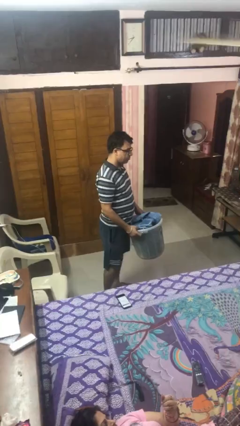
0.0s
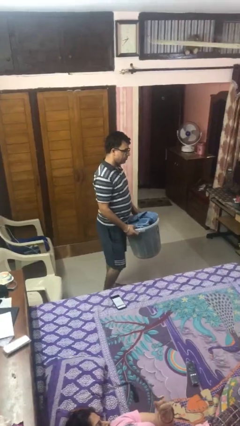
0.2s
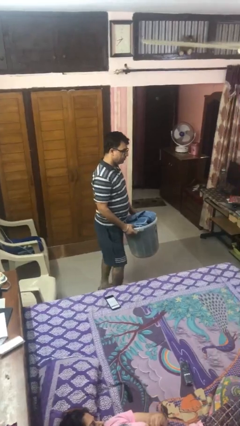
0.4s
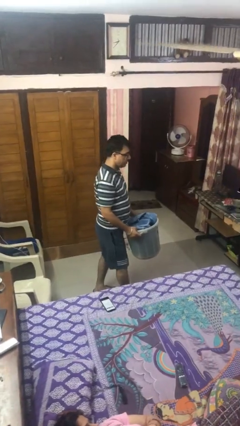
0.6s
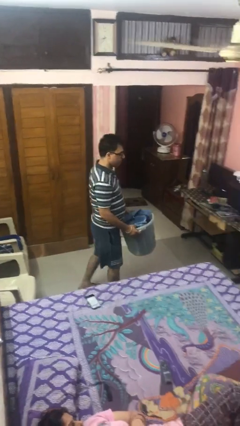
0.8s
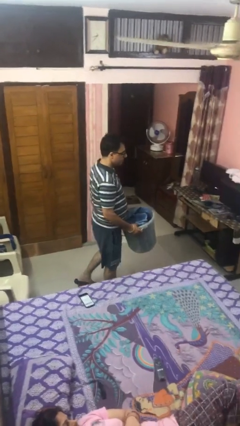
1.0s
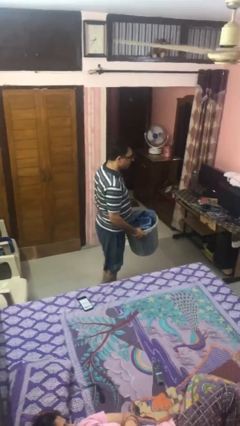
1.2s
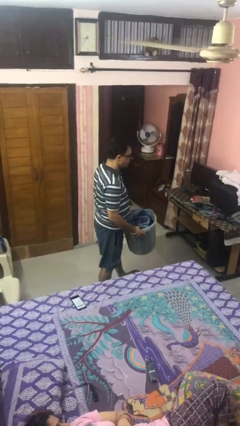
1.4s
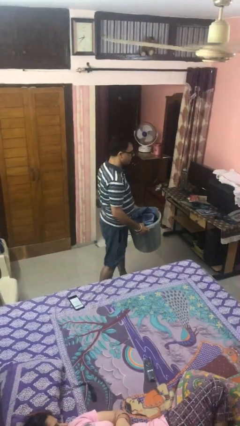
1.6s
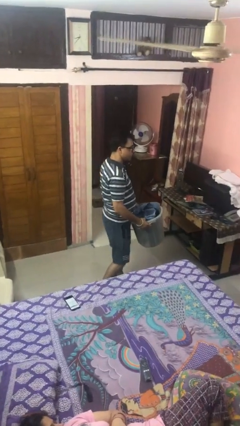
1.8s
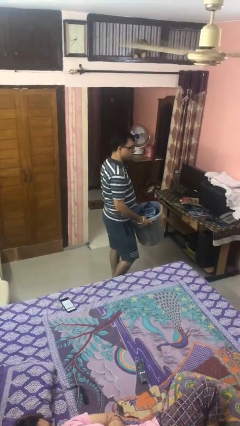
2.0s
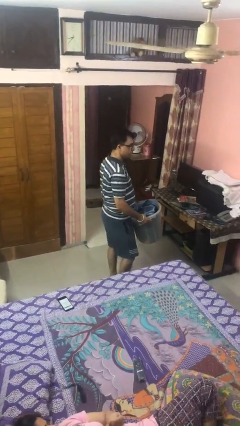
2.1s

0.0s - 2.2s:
person carries laundry basket

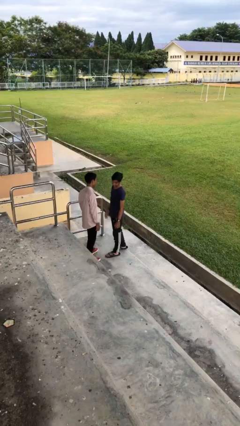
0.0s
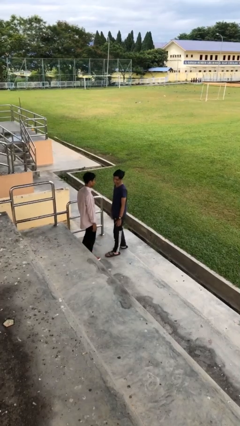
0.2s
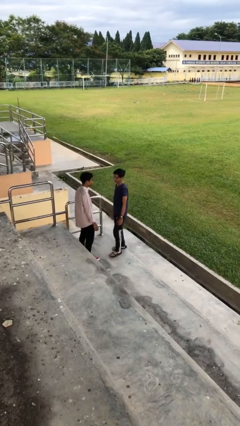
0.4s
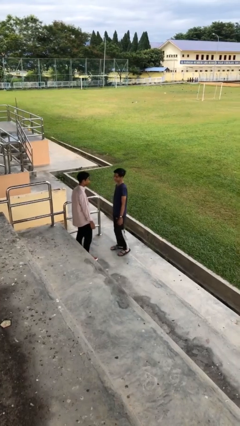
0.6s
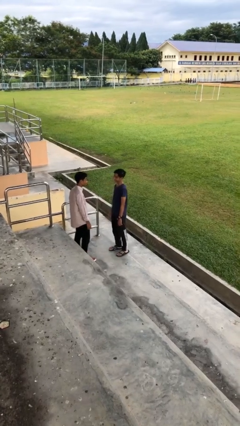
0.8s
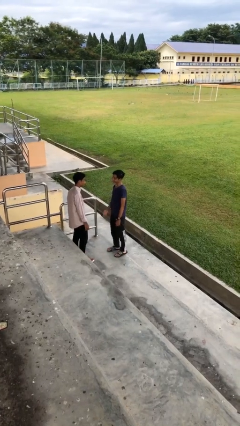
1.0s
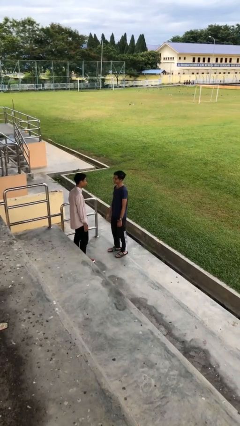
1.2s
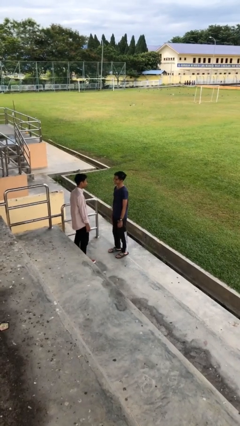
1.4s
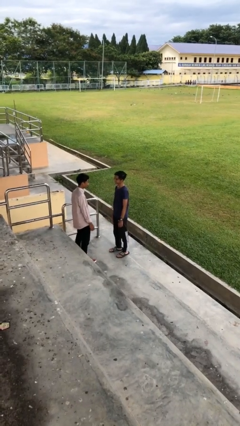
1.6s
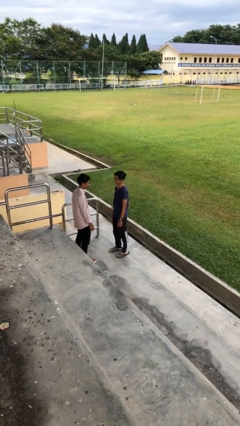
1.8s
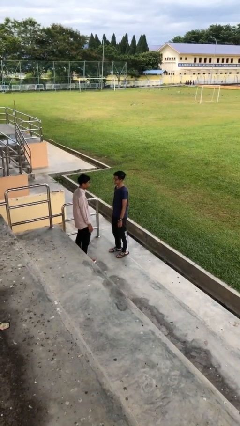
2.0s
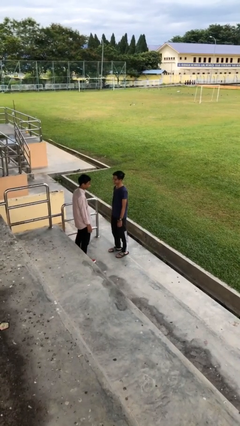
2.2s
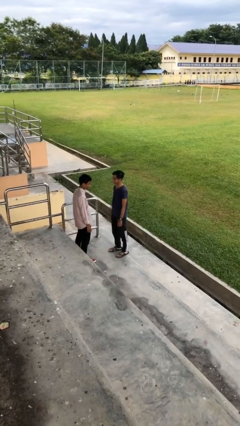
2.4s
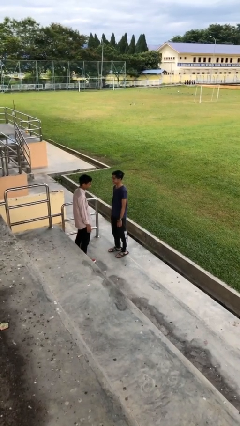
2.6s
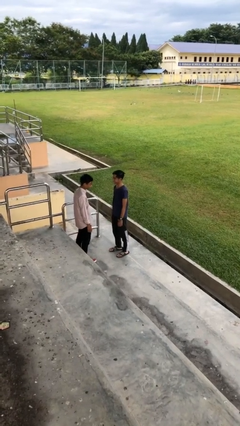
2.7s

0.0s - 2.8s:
person talks to person

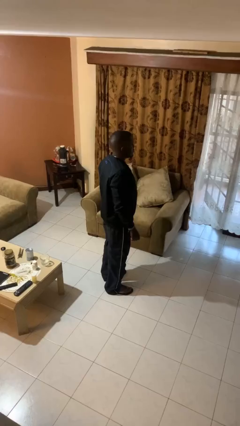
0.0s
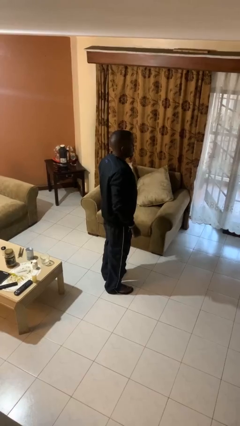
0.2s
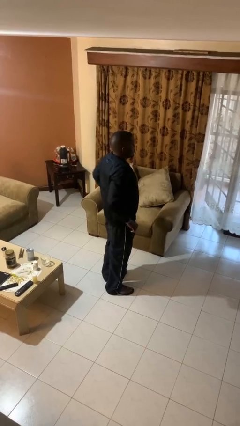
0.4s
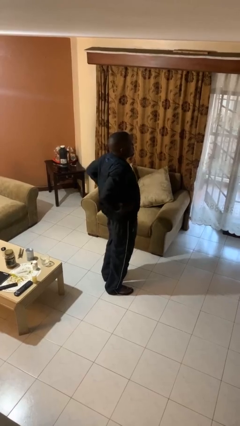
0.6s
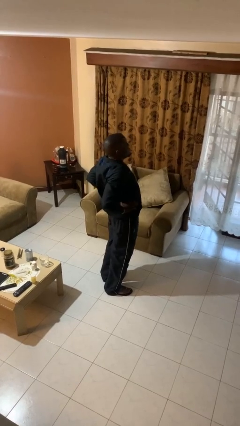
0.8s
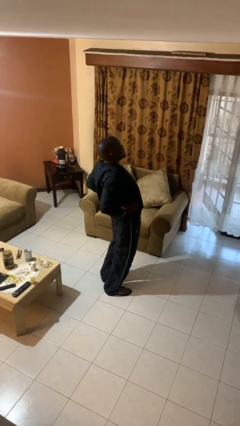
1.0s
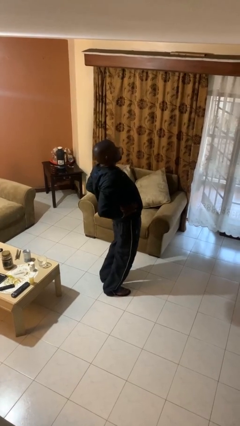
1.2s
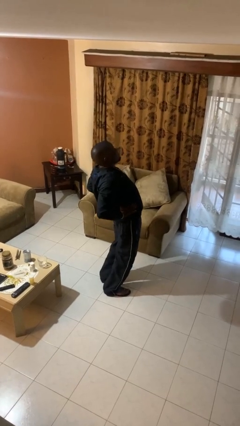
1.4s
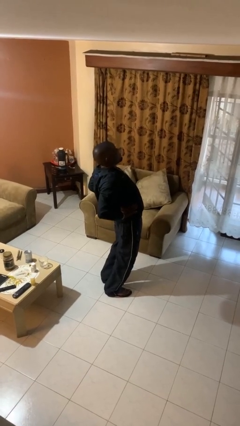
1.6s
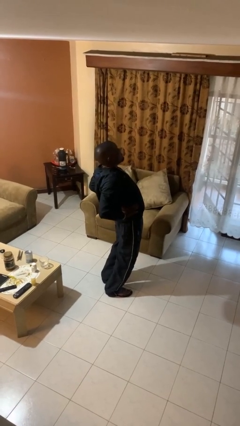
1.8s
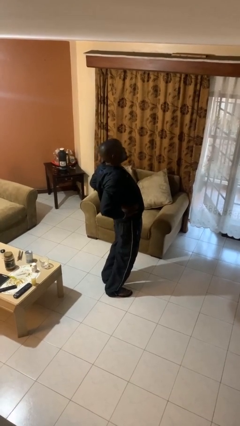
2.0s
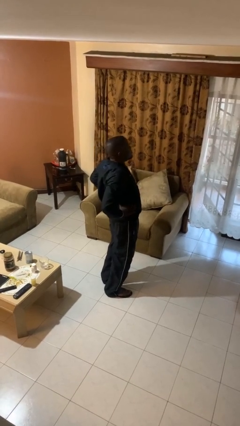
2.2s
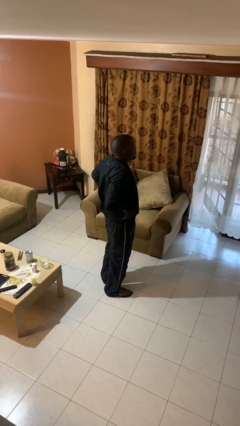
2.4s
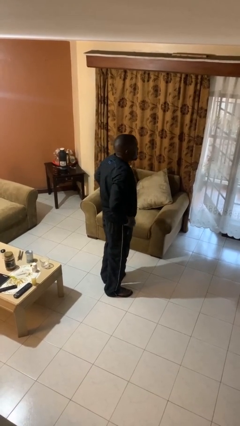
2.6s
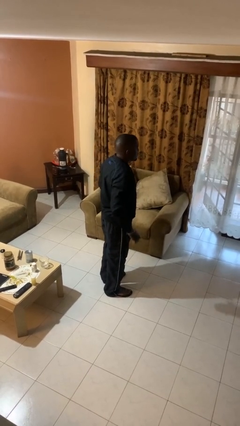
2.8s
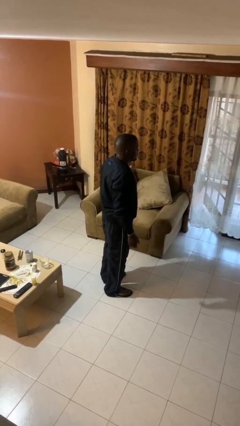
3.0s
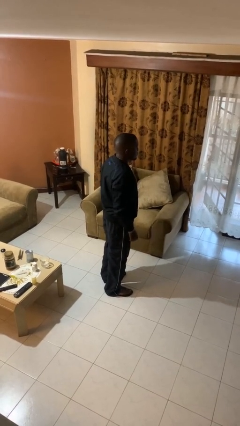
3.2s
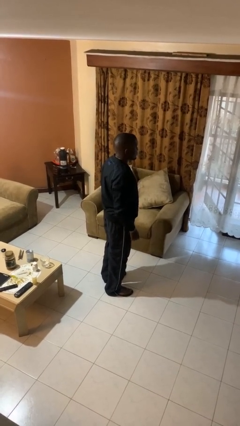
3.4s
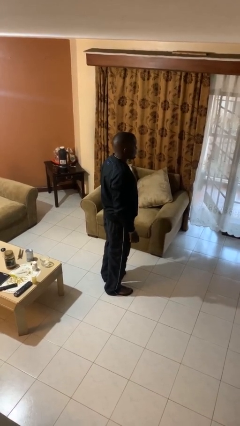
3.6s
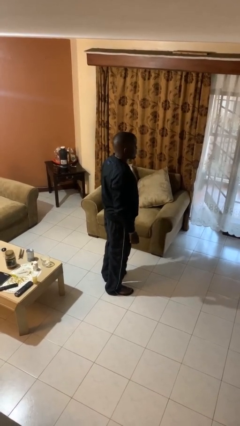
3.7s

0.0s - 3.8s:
person stretches back

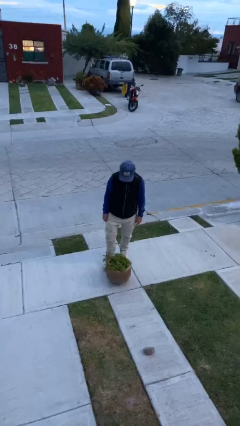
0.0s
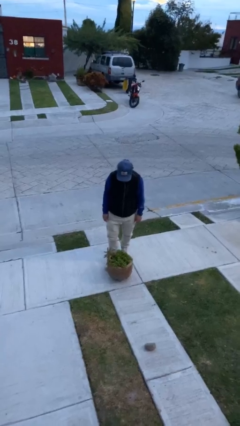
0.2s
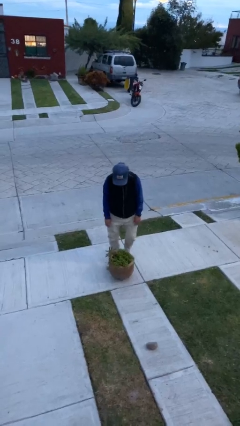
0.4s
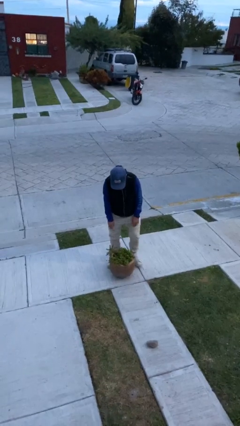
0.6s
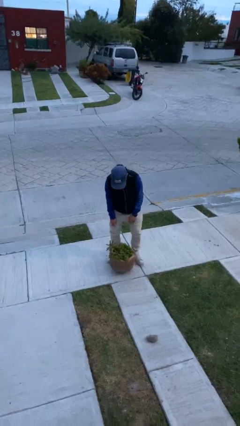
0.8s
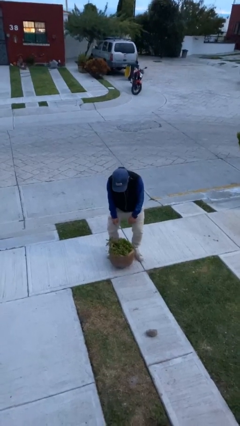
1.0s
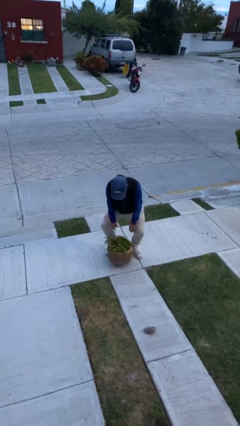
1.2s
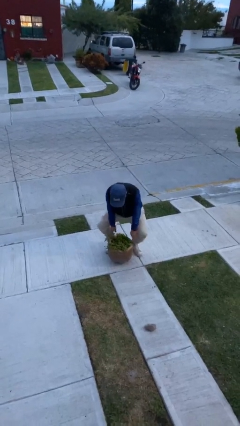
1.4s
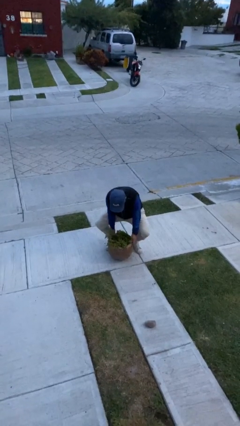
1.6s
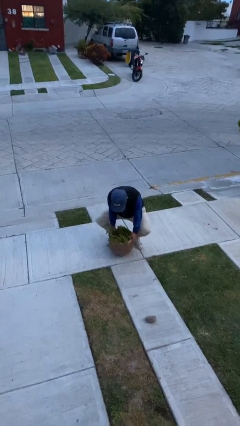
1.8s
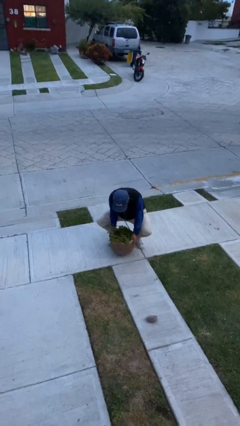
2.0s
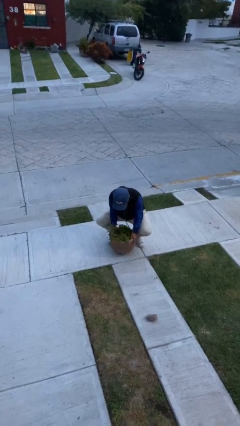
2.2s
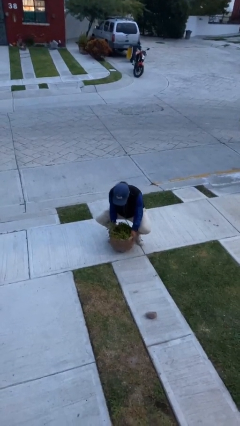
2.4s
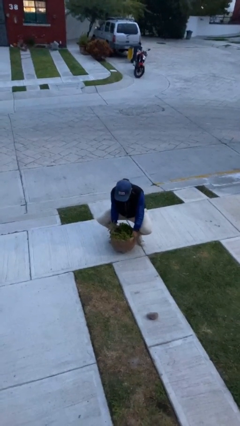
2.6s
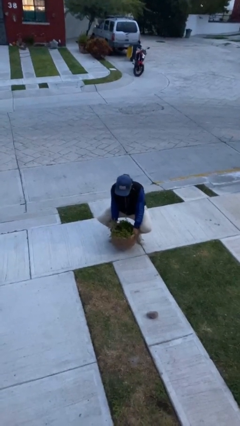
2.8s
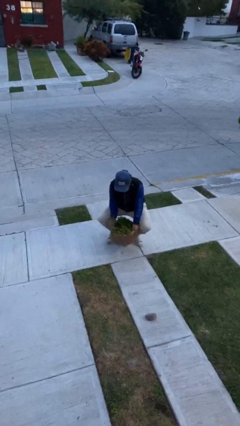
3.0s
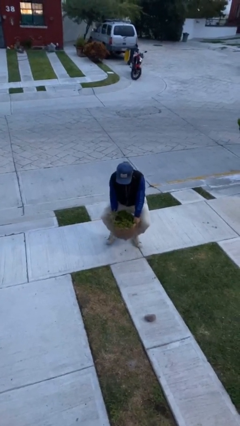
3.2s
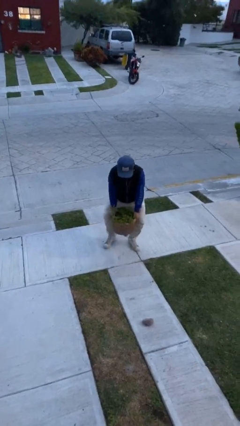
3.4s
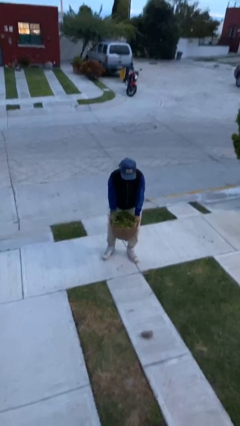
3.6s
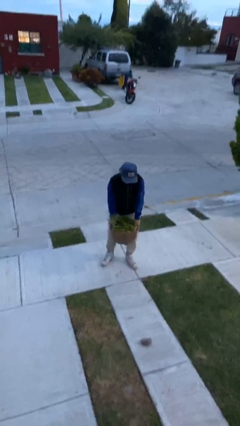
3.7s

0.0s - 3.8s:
person picks up object from floor

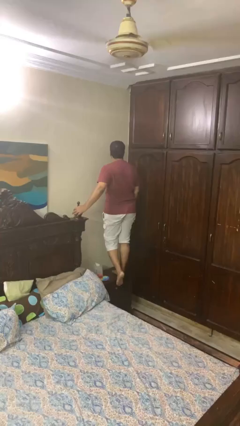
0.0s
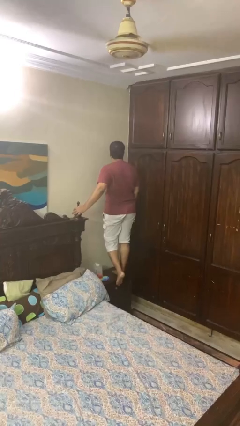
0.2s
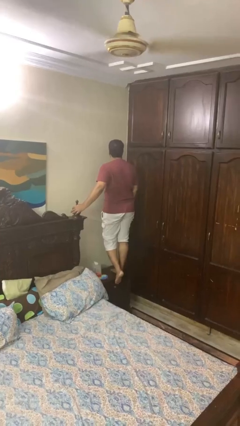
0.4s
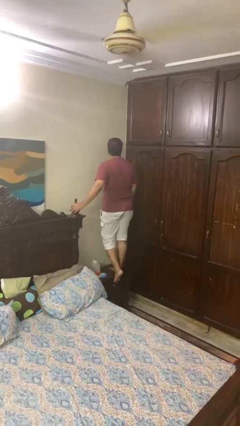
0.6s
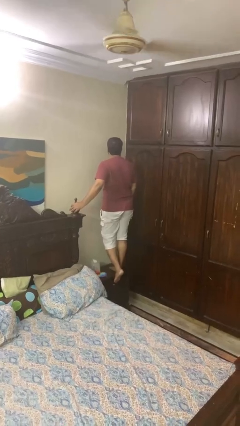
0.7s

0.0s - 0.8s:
person climbs on table

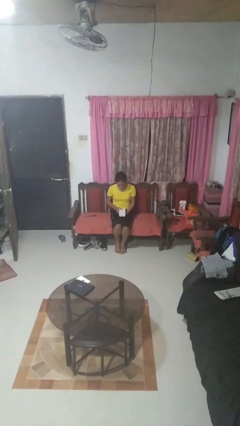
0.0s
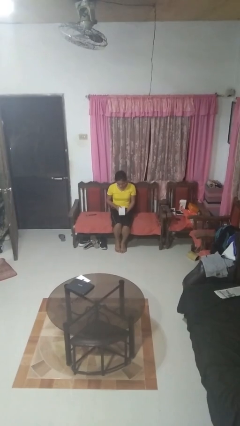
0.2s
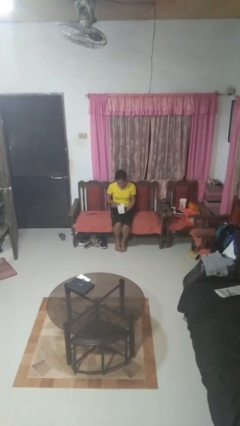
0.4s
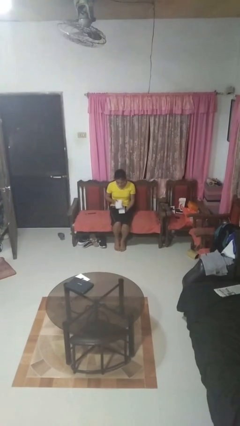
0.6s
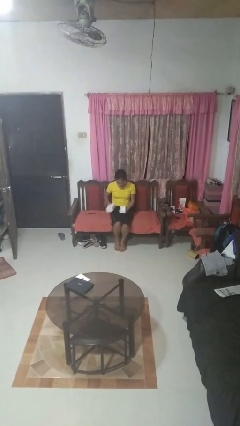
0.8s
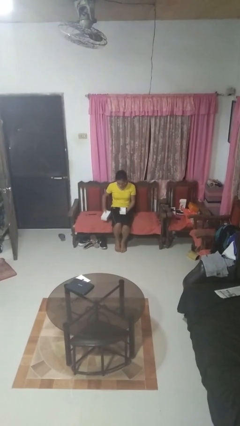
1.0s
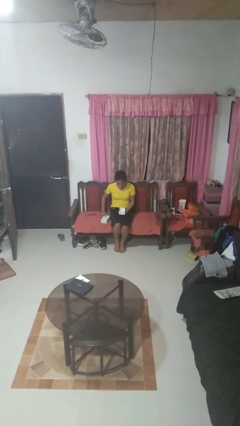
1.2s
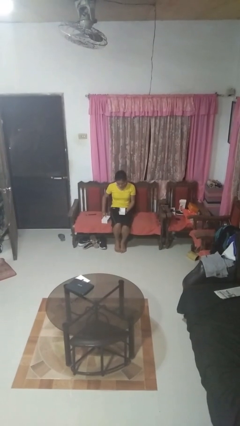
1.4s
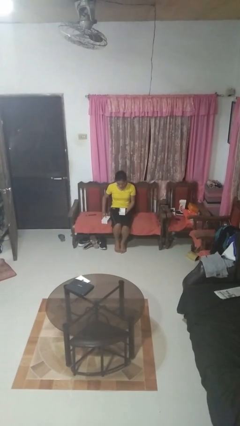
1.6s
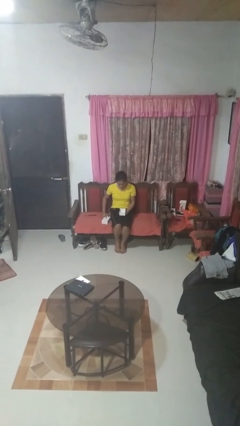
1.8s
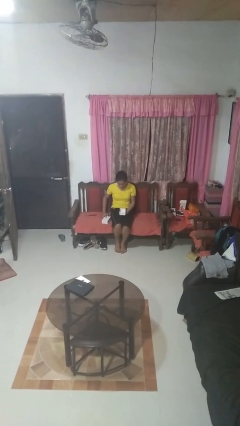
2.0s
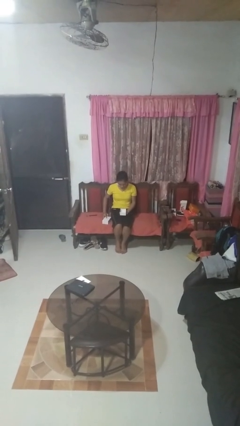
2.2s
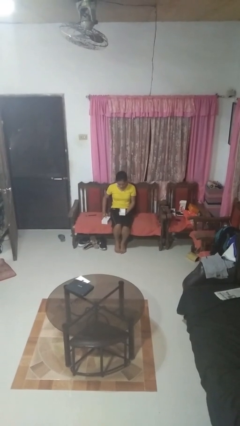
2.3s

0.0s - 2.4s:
person opens jewelry box

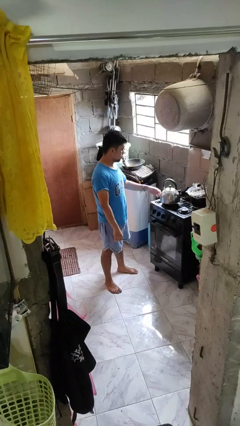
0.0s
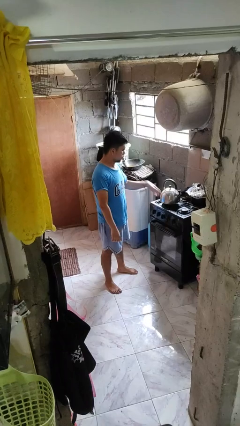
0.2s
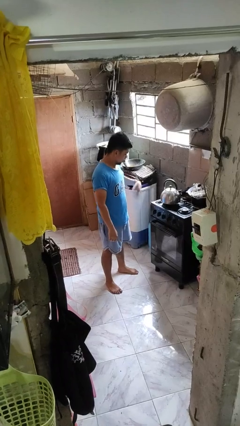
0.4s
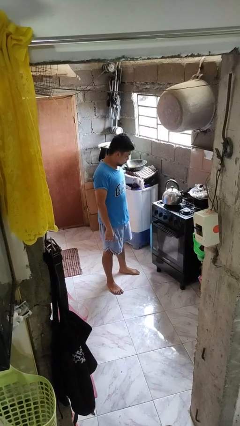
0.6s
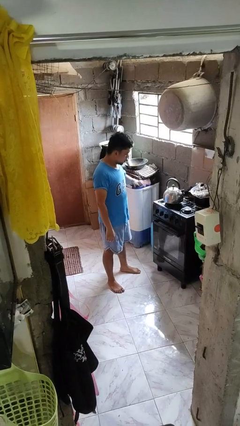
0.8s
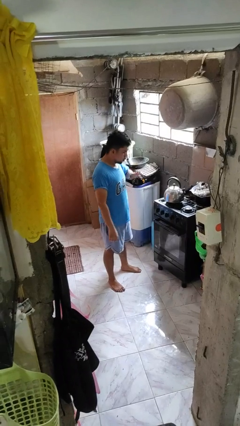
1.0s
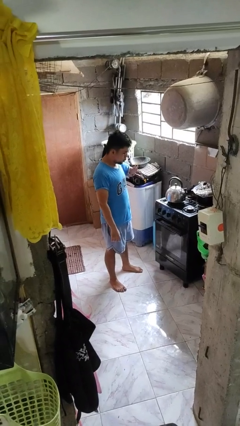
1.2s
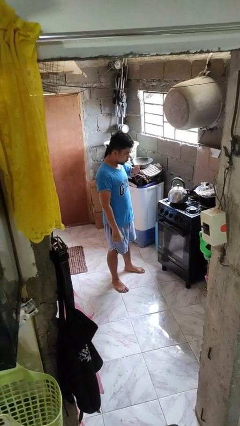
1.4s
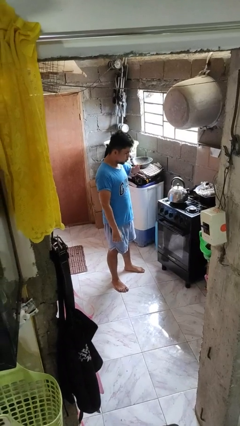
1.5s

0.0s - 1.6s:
person burns hand

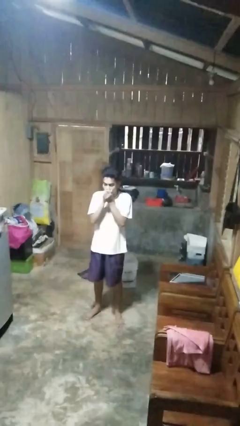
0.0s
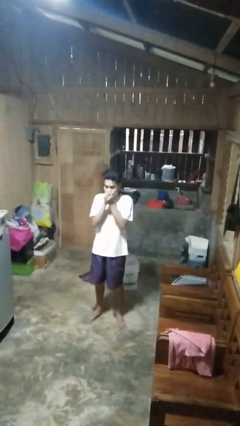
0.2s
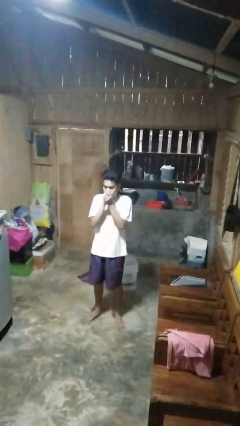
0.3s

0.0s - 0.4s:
person blows into hands
